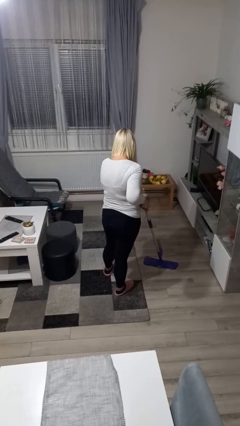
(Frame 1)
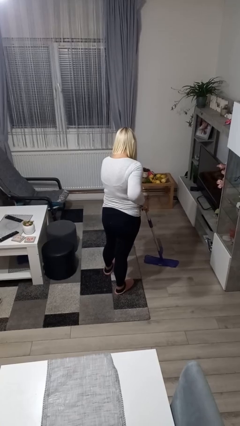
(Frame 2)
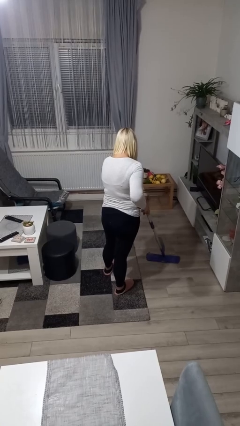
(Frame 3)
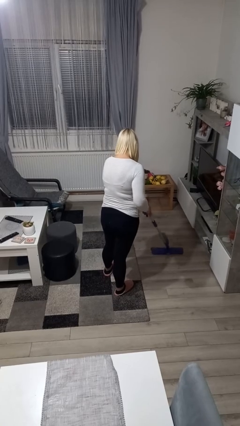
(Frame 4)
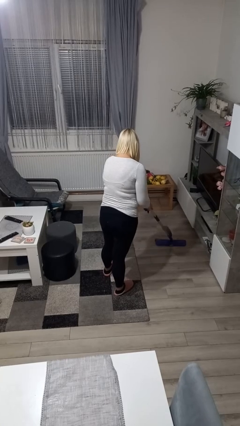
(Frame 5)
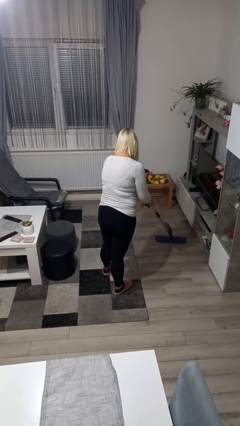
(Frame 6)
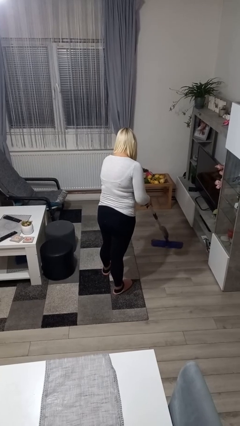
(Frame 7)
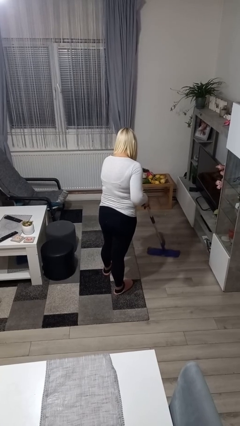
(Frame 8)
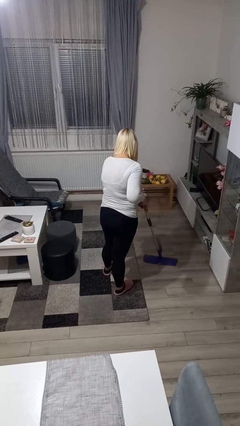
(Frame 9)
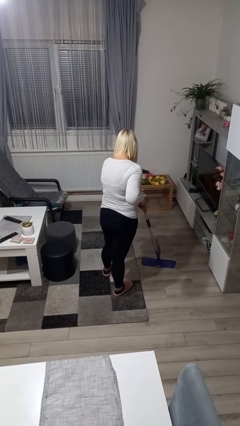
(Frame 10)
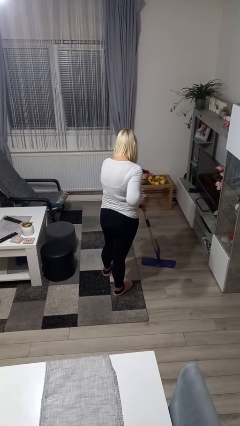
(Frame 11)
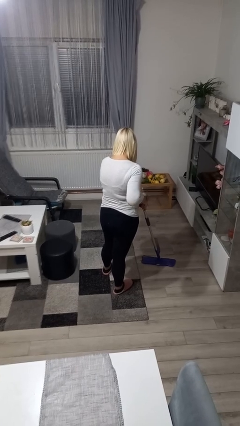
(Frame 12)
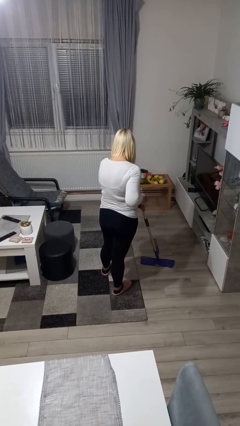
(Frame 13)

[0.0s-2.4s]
person mops

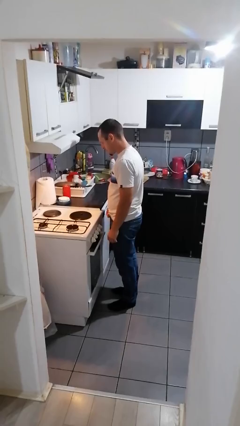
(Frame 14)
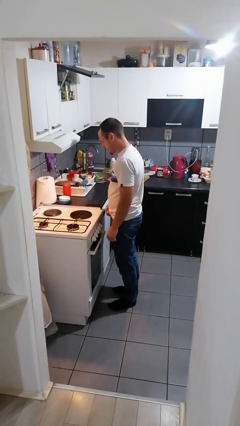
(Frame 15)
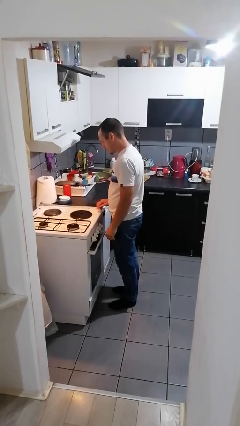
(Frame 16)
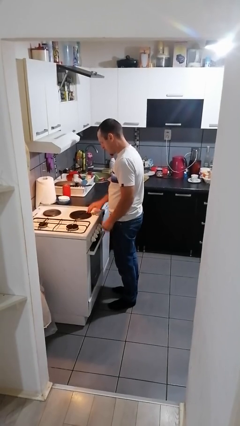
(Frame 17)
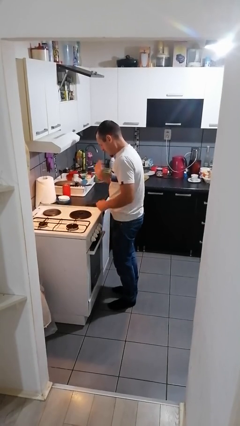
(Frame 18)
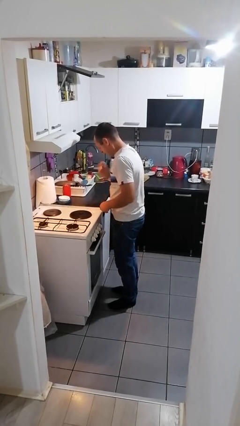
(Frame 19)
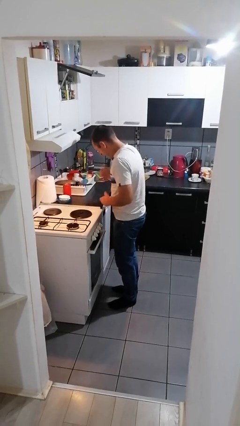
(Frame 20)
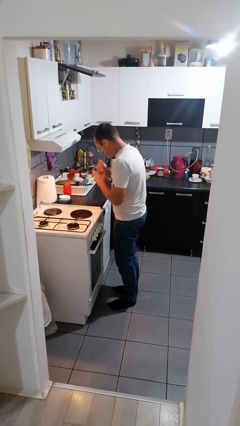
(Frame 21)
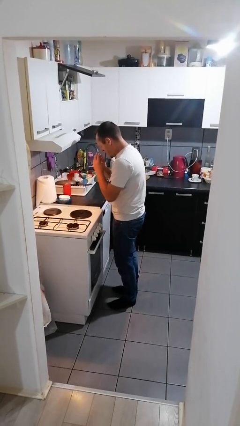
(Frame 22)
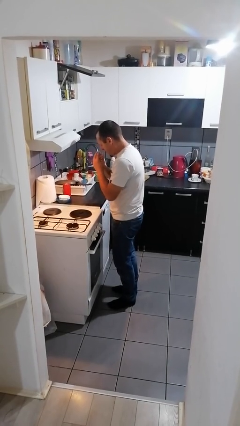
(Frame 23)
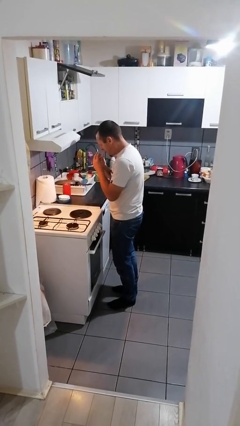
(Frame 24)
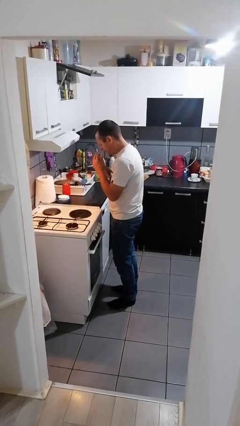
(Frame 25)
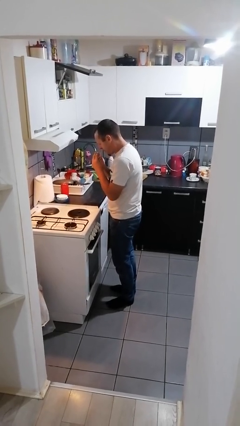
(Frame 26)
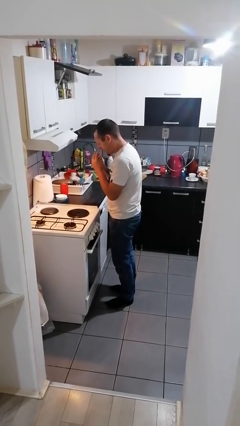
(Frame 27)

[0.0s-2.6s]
person burns hand

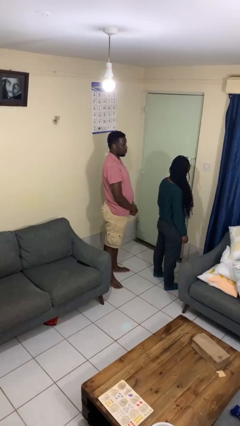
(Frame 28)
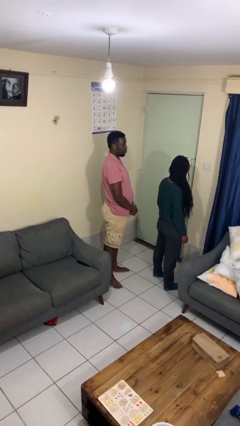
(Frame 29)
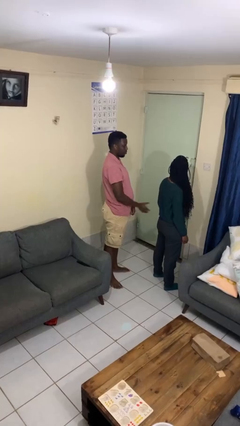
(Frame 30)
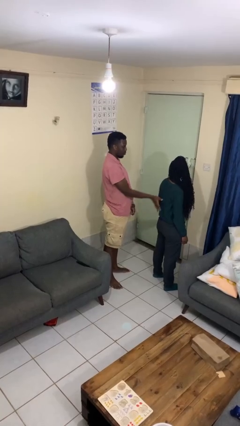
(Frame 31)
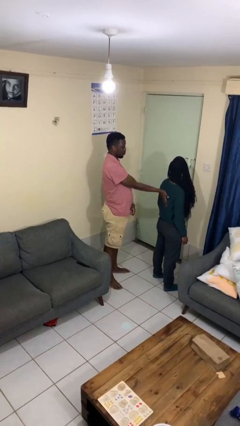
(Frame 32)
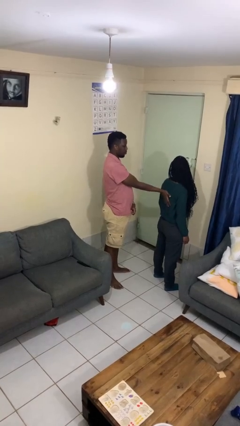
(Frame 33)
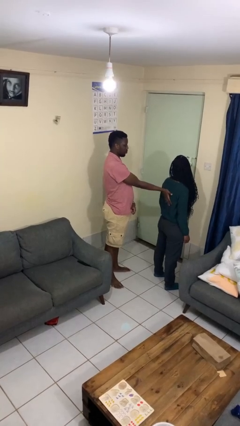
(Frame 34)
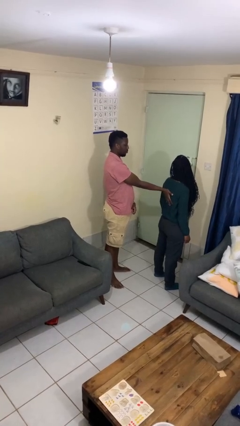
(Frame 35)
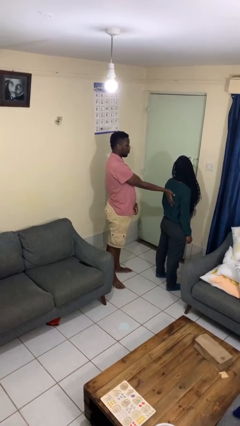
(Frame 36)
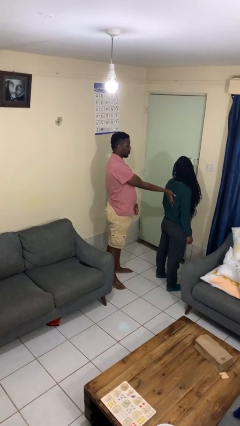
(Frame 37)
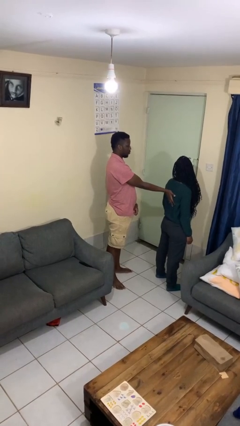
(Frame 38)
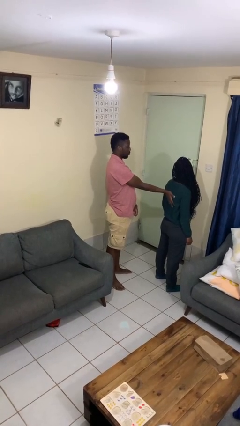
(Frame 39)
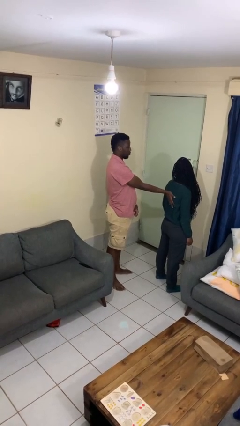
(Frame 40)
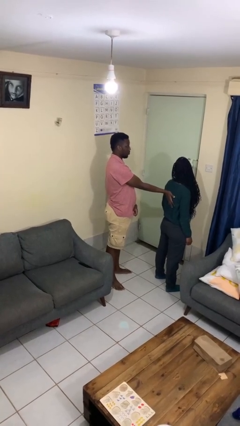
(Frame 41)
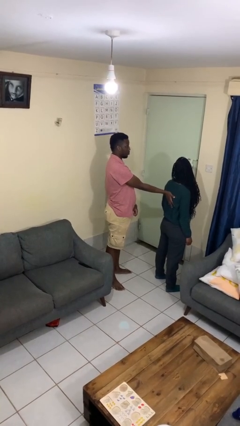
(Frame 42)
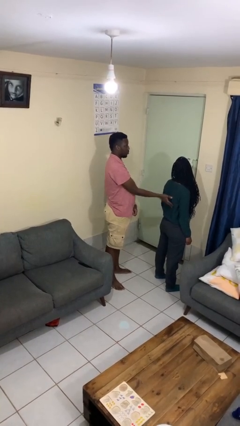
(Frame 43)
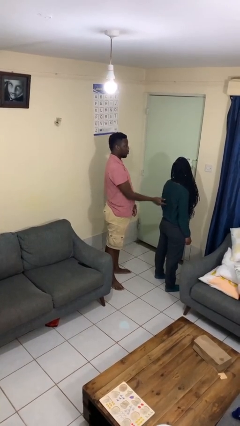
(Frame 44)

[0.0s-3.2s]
person touches back of person

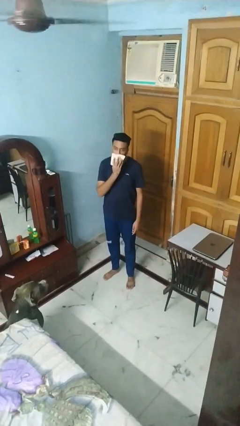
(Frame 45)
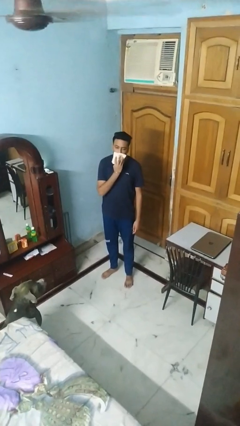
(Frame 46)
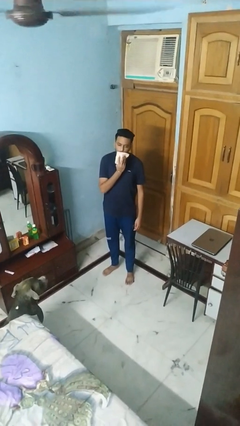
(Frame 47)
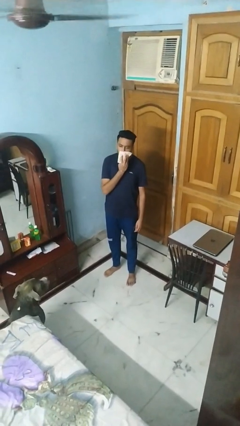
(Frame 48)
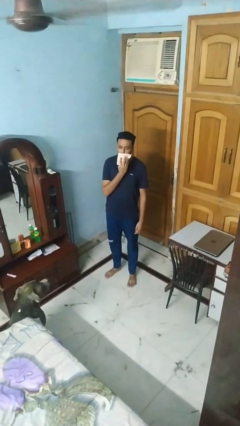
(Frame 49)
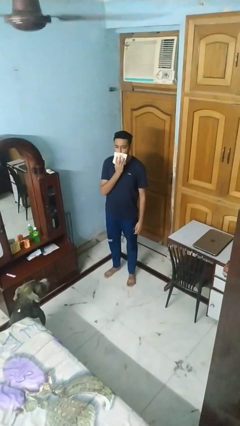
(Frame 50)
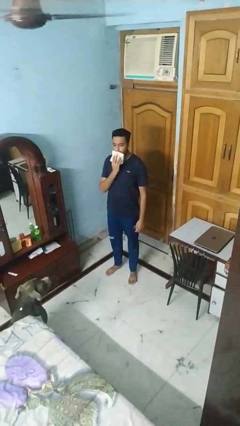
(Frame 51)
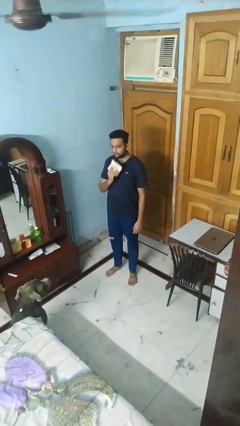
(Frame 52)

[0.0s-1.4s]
person wipes mouth with napkin

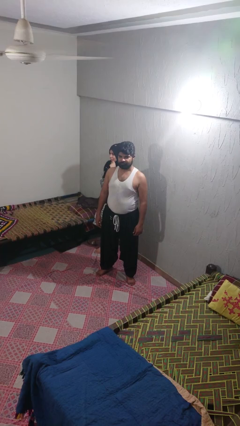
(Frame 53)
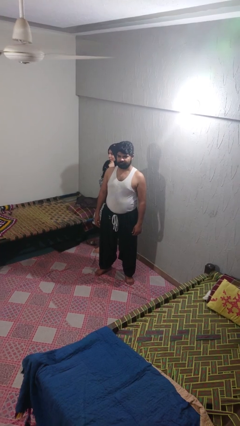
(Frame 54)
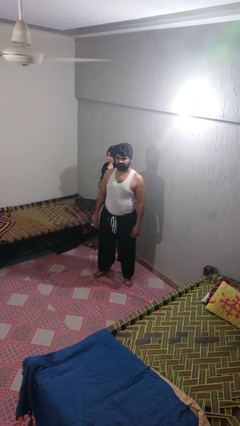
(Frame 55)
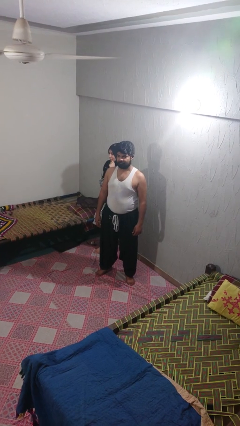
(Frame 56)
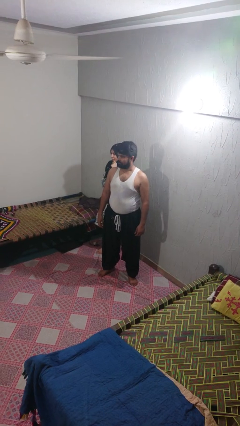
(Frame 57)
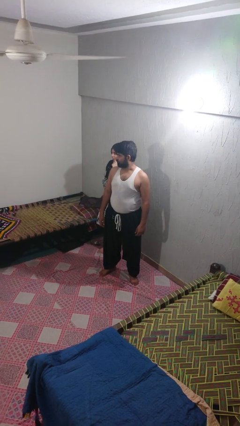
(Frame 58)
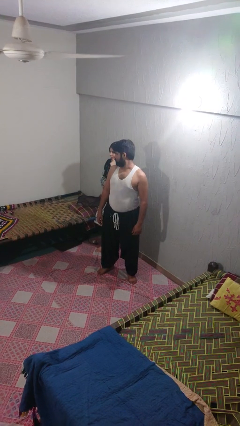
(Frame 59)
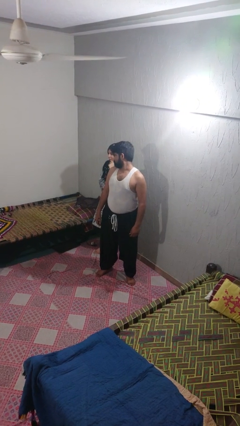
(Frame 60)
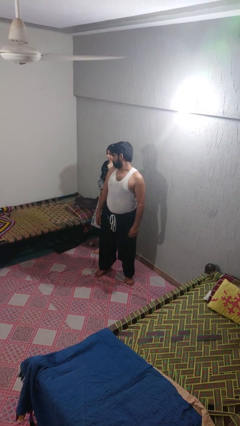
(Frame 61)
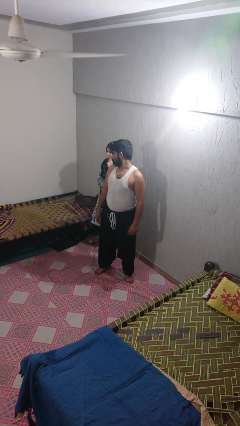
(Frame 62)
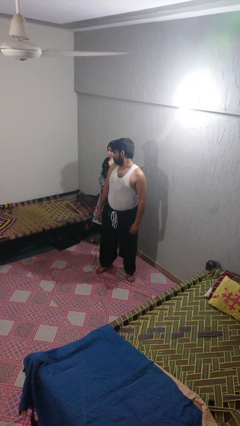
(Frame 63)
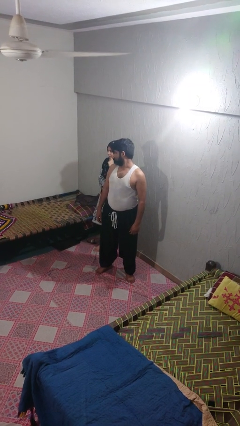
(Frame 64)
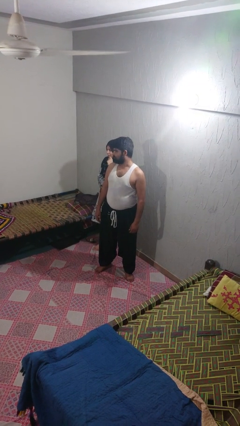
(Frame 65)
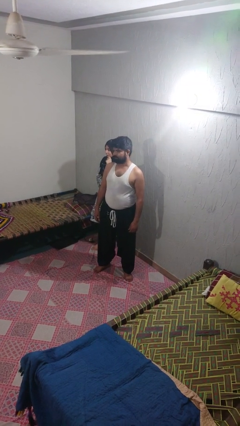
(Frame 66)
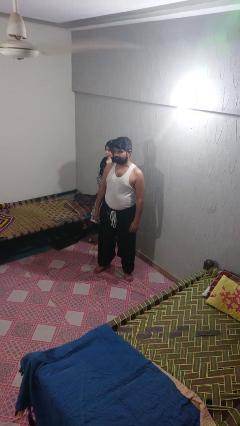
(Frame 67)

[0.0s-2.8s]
person looks over shoulder

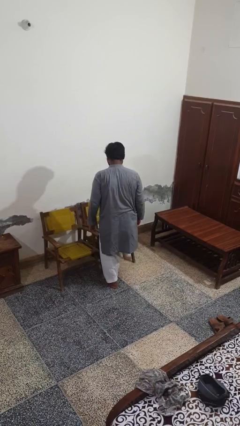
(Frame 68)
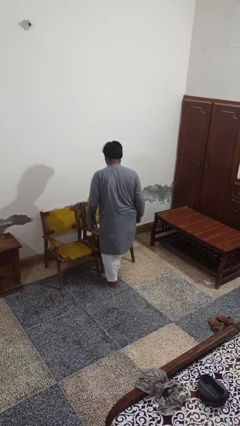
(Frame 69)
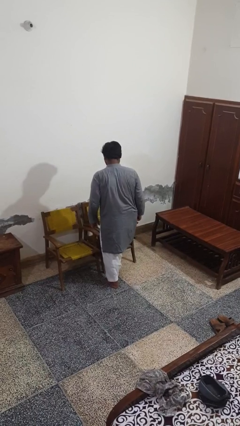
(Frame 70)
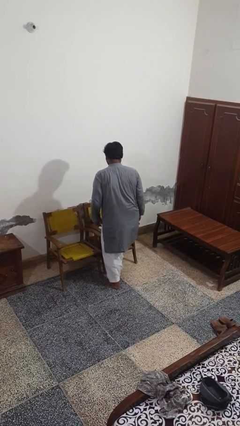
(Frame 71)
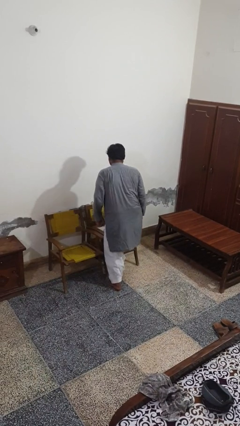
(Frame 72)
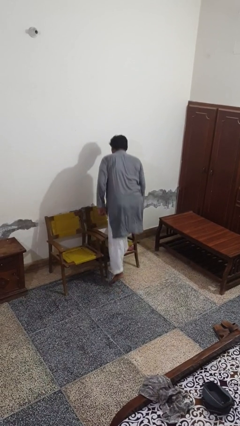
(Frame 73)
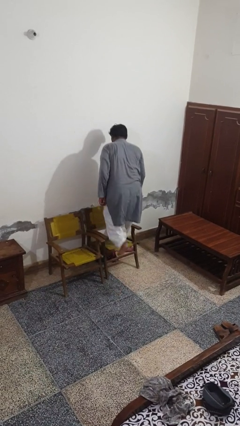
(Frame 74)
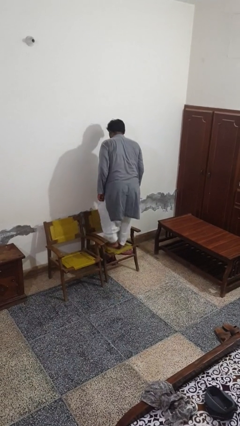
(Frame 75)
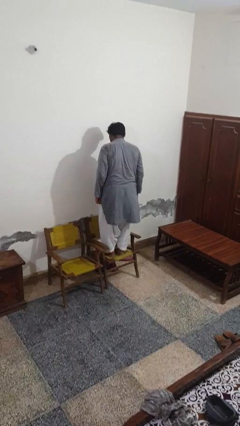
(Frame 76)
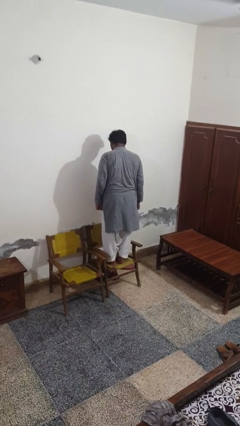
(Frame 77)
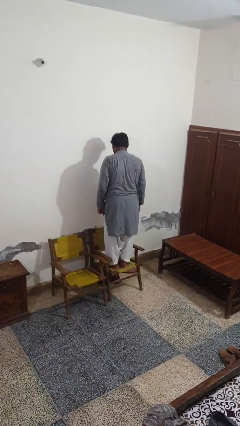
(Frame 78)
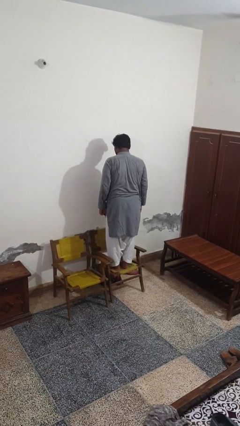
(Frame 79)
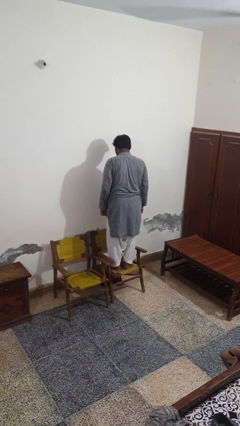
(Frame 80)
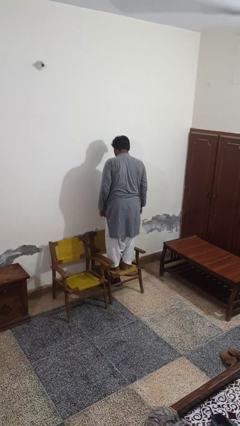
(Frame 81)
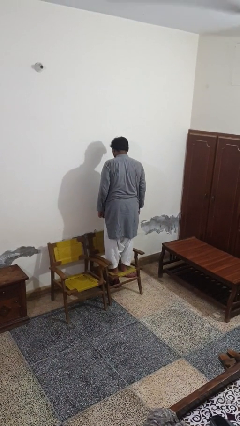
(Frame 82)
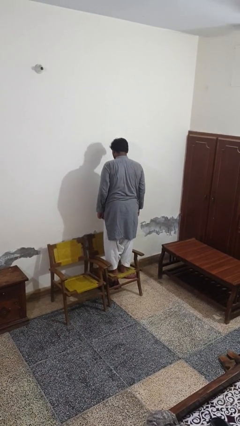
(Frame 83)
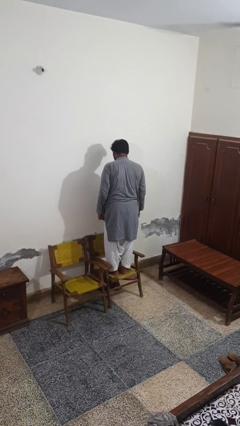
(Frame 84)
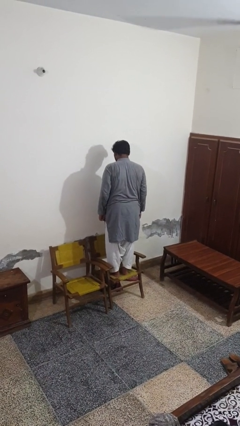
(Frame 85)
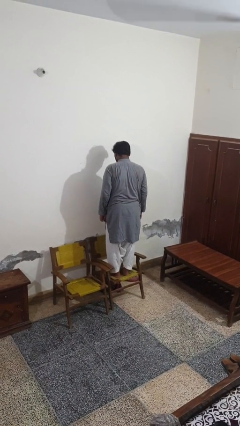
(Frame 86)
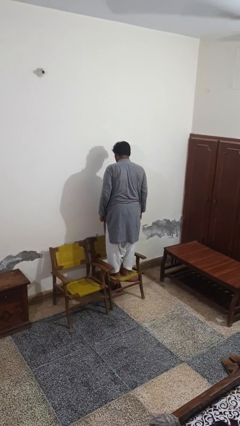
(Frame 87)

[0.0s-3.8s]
person climbs on chair

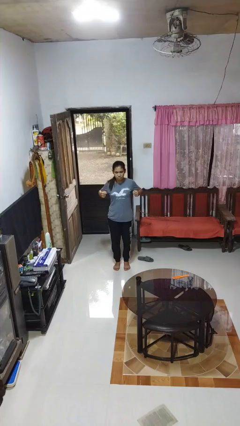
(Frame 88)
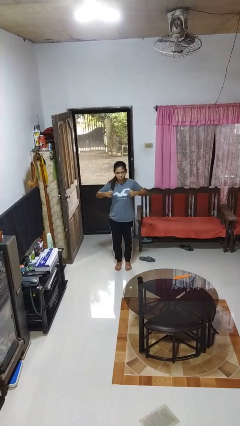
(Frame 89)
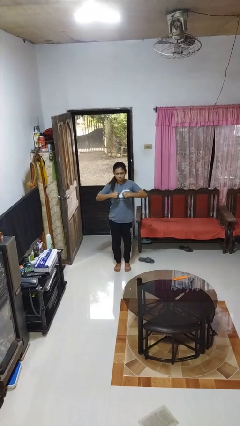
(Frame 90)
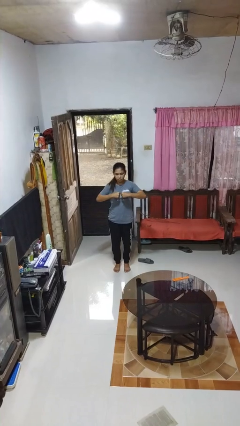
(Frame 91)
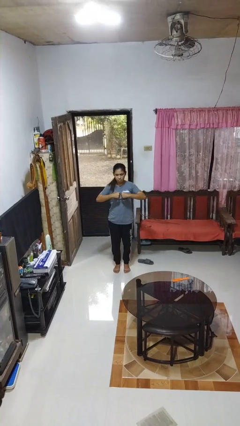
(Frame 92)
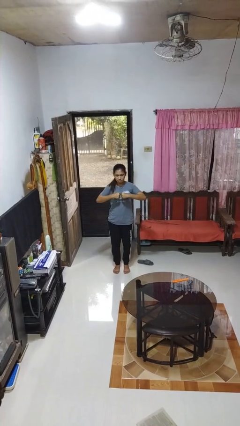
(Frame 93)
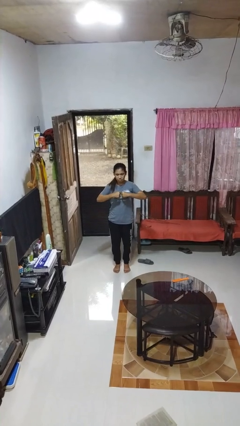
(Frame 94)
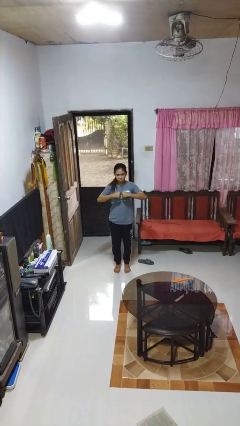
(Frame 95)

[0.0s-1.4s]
person gestures zoom out
